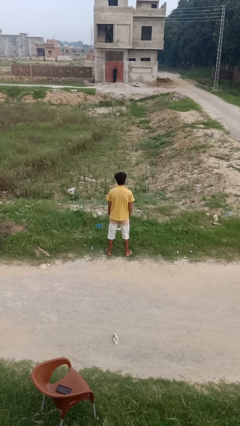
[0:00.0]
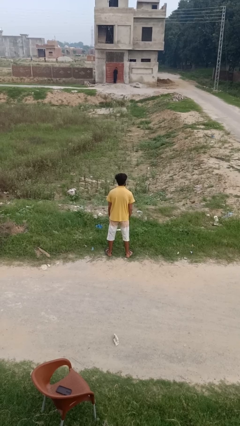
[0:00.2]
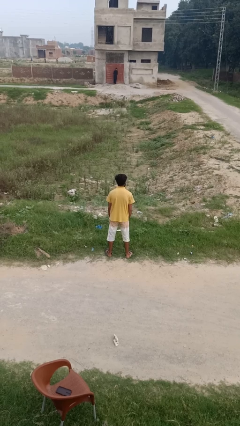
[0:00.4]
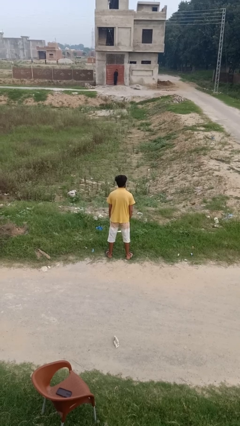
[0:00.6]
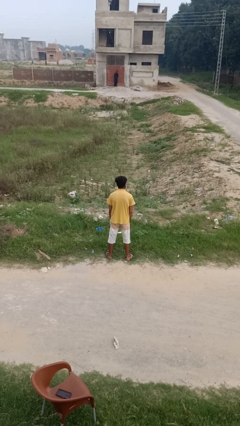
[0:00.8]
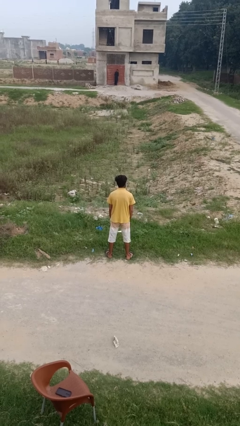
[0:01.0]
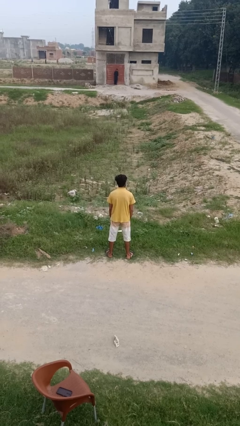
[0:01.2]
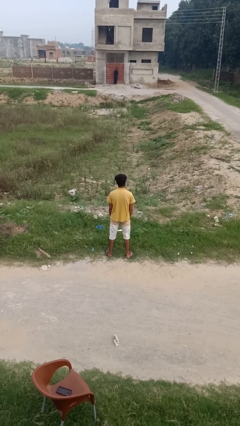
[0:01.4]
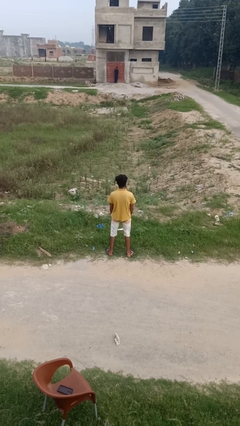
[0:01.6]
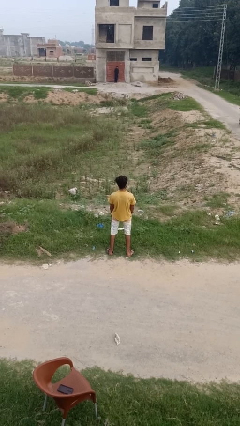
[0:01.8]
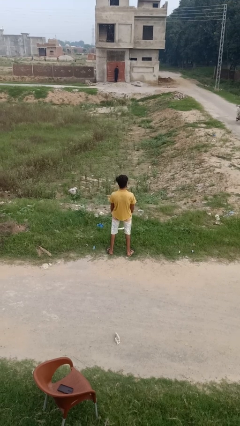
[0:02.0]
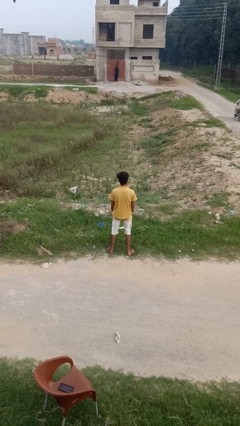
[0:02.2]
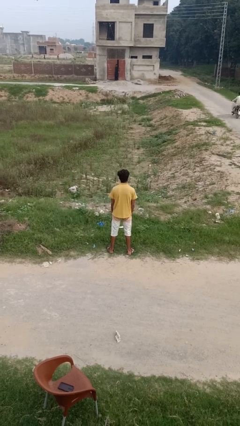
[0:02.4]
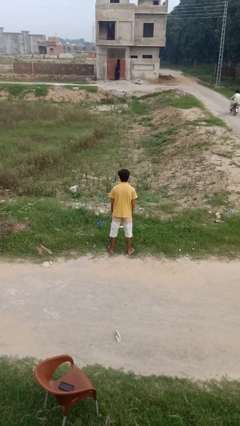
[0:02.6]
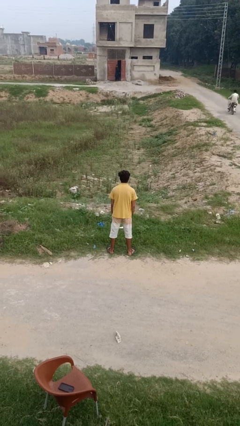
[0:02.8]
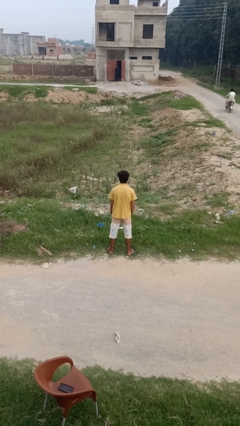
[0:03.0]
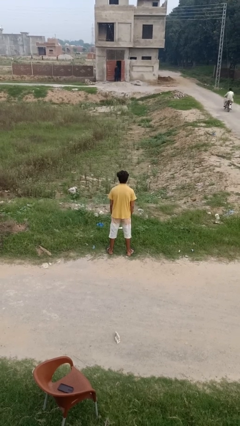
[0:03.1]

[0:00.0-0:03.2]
person wiggles hips

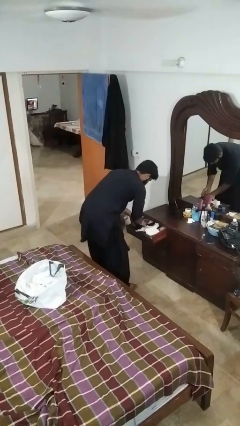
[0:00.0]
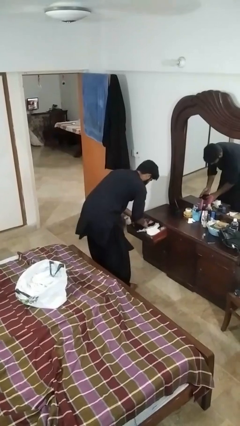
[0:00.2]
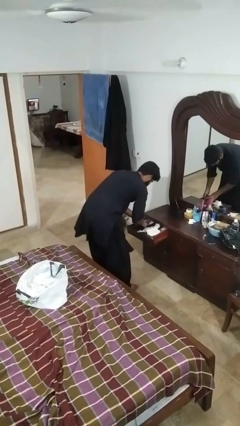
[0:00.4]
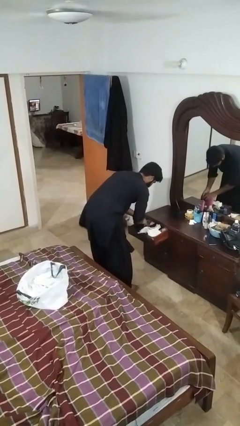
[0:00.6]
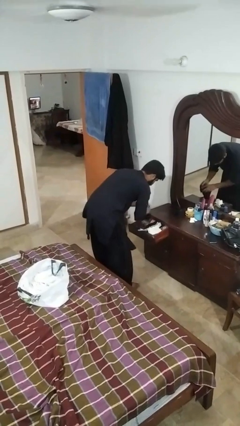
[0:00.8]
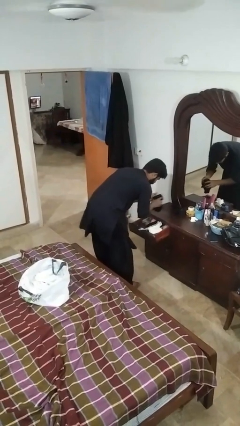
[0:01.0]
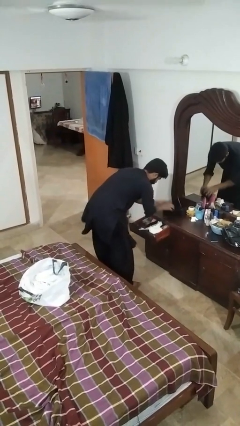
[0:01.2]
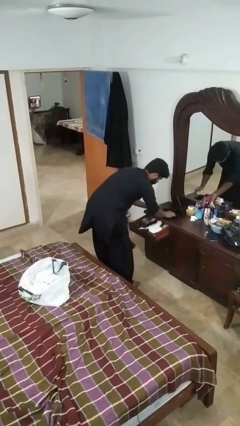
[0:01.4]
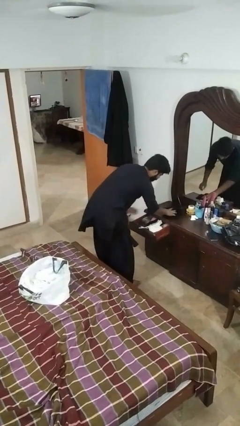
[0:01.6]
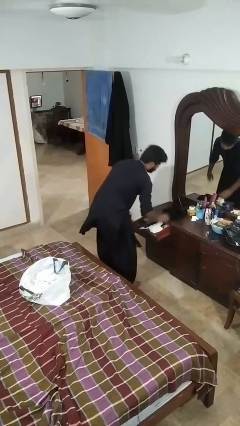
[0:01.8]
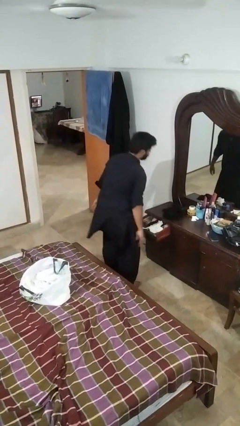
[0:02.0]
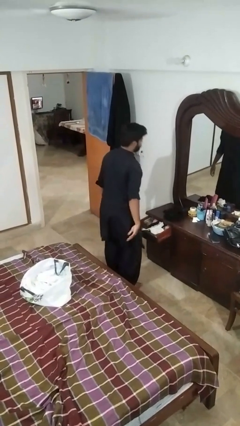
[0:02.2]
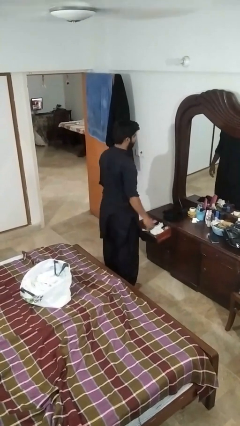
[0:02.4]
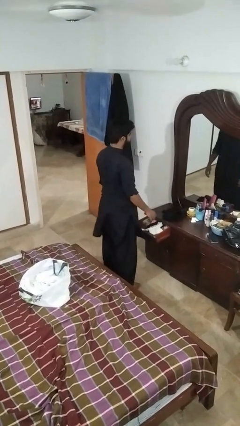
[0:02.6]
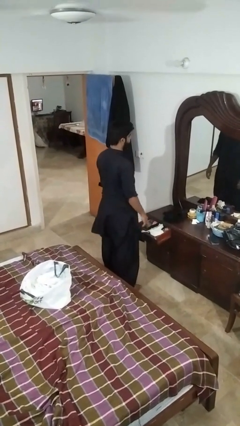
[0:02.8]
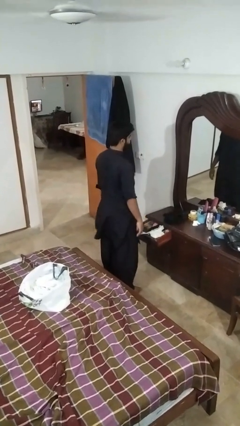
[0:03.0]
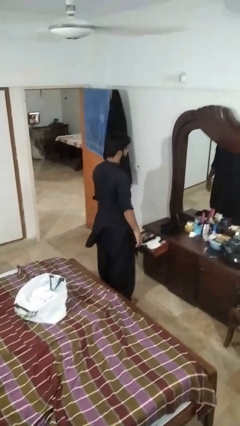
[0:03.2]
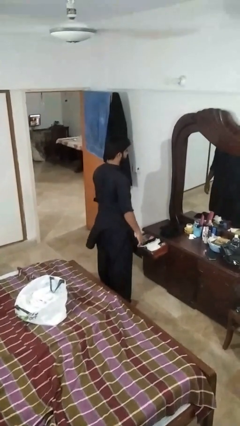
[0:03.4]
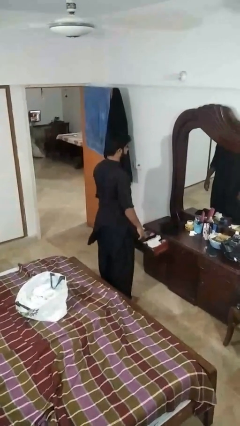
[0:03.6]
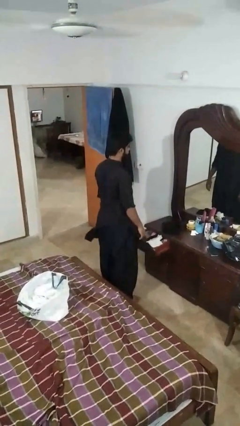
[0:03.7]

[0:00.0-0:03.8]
person takes clothes from dresser

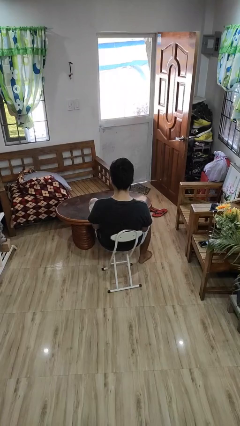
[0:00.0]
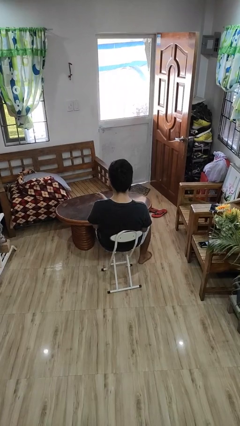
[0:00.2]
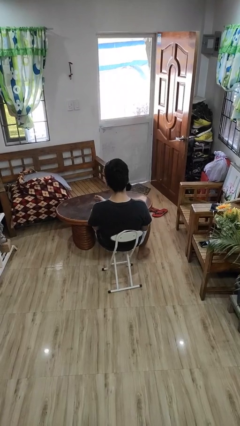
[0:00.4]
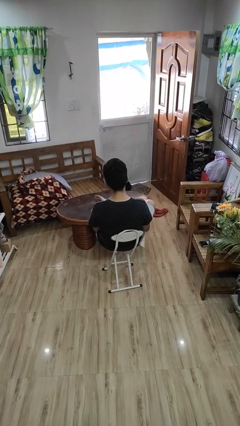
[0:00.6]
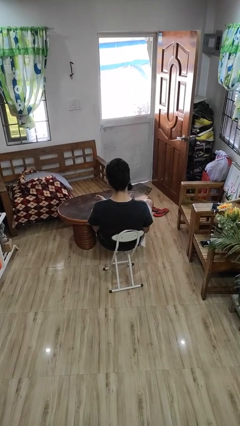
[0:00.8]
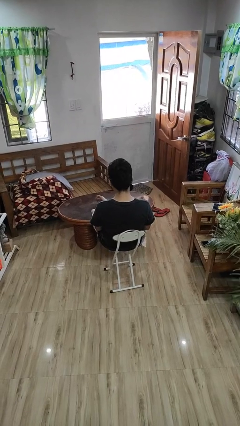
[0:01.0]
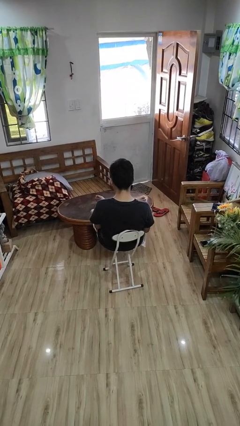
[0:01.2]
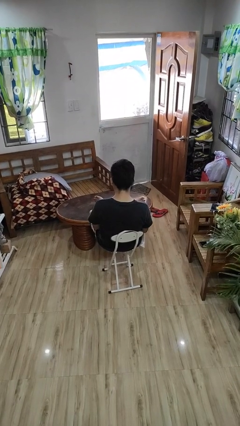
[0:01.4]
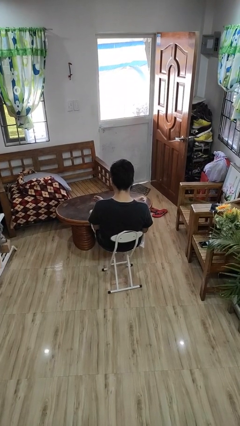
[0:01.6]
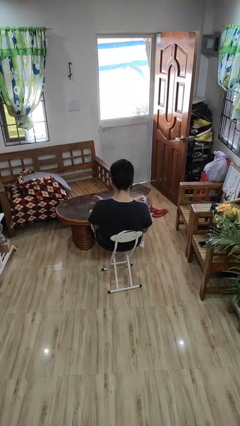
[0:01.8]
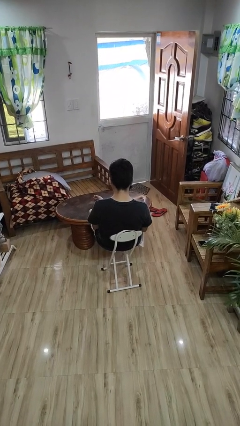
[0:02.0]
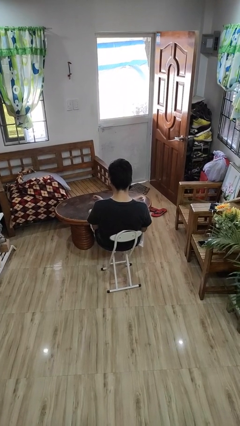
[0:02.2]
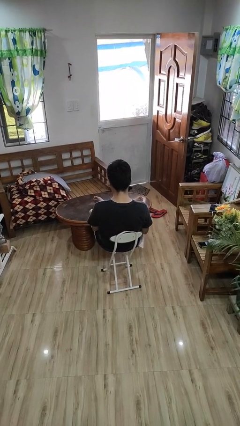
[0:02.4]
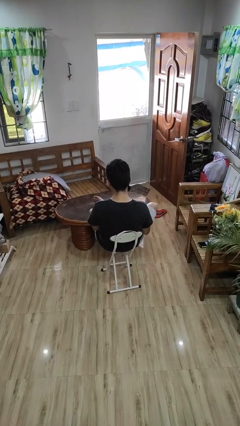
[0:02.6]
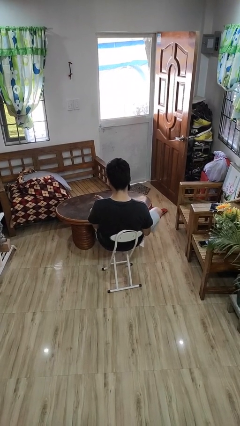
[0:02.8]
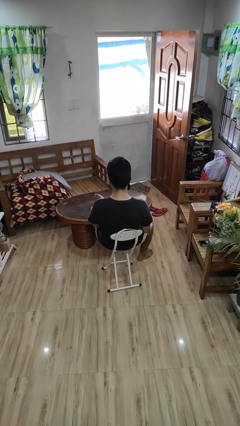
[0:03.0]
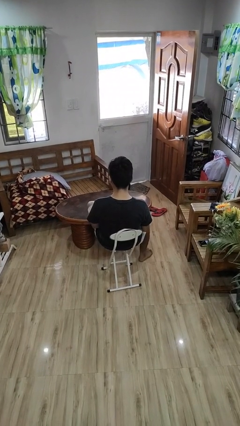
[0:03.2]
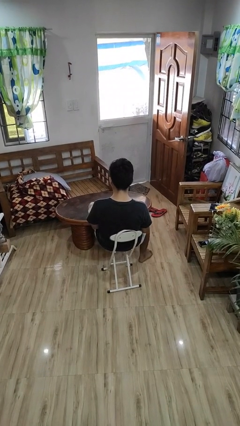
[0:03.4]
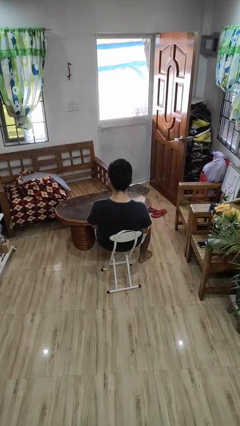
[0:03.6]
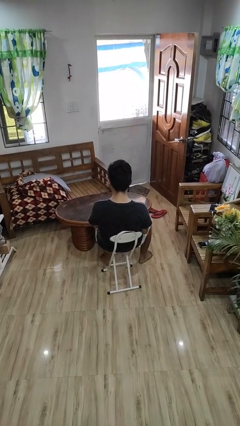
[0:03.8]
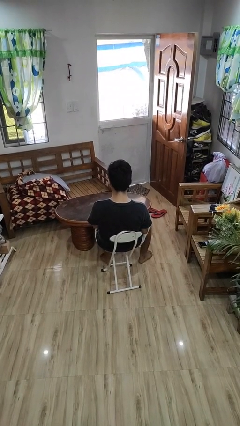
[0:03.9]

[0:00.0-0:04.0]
person puts feet up

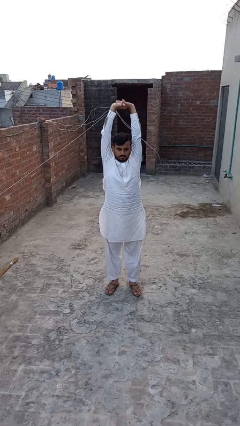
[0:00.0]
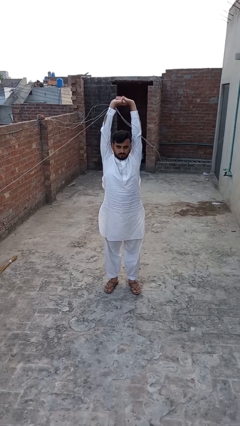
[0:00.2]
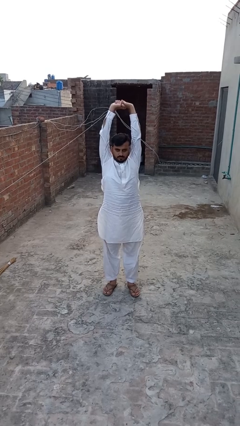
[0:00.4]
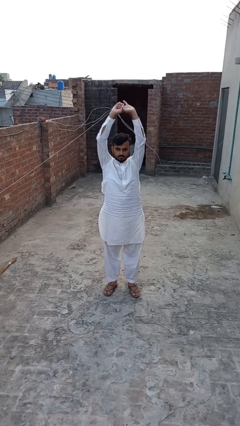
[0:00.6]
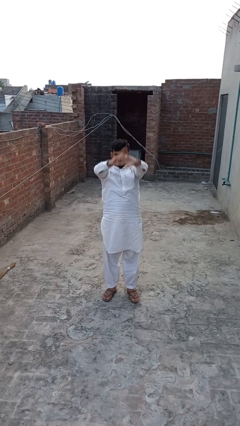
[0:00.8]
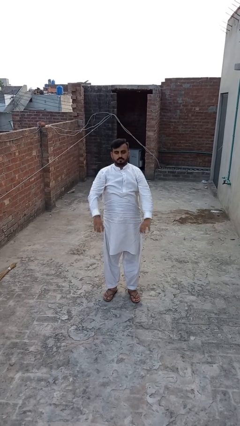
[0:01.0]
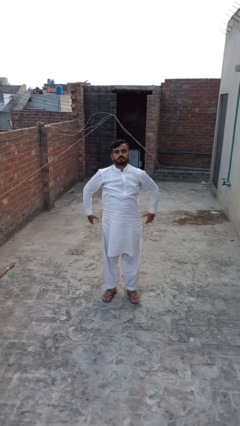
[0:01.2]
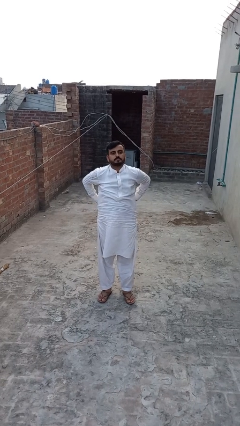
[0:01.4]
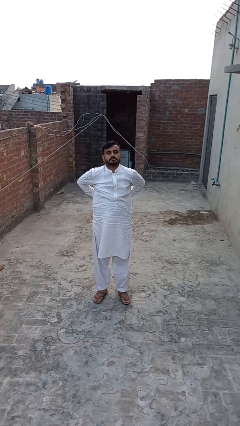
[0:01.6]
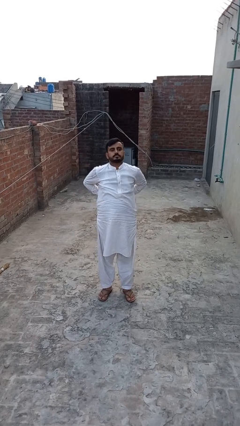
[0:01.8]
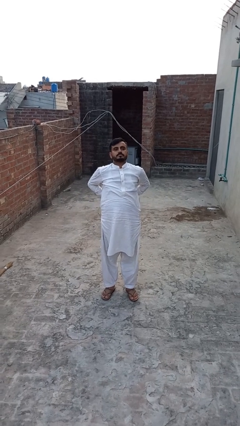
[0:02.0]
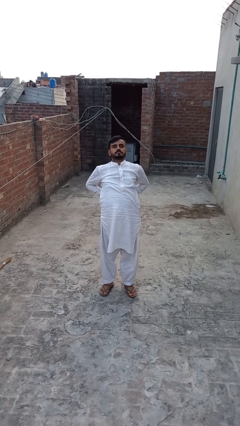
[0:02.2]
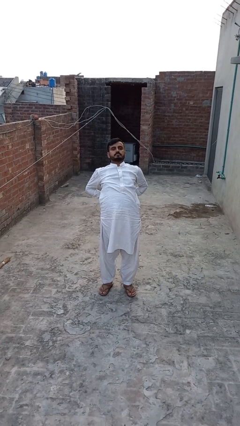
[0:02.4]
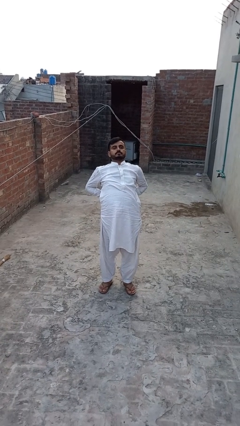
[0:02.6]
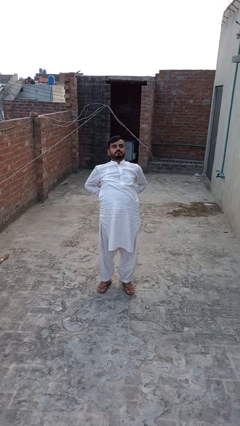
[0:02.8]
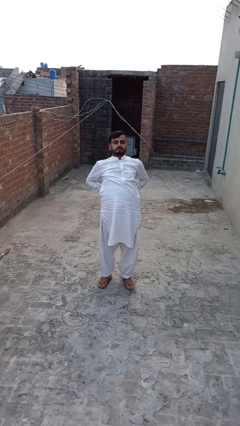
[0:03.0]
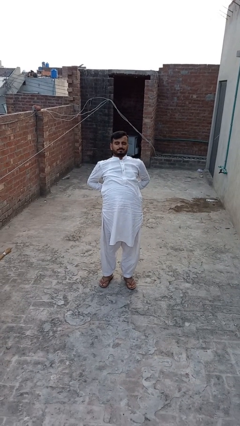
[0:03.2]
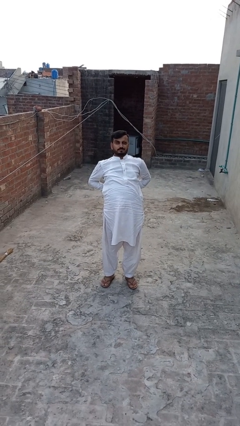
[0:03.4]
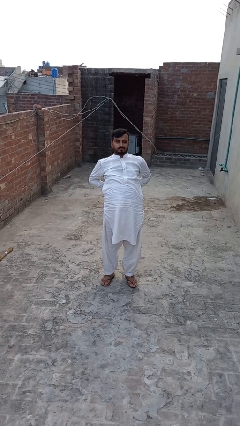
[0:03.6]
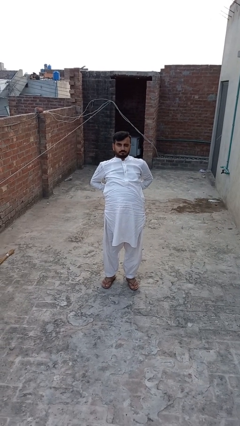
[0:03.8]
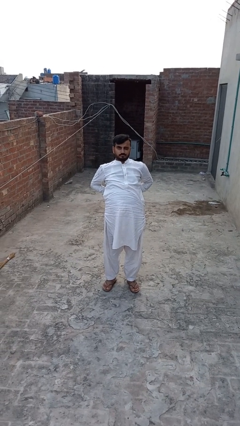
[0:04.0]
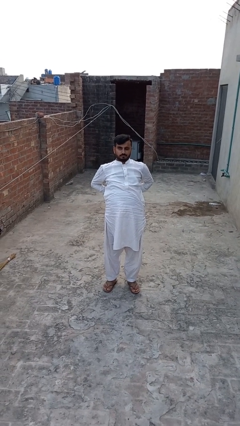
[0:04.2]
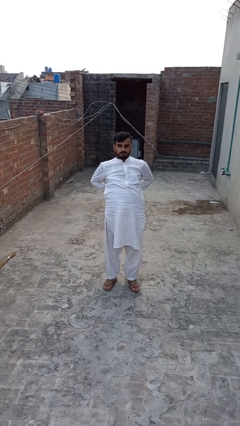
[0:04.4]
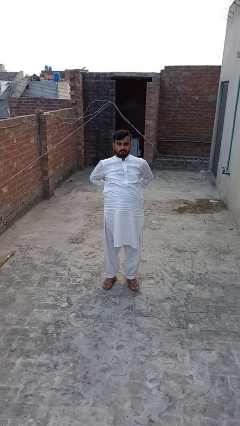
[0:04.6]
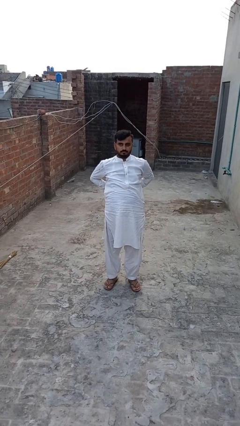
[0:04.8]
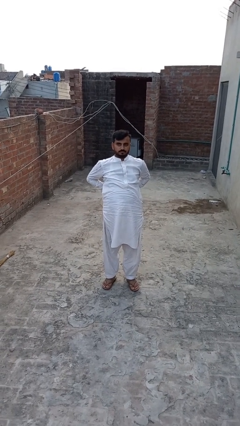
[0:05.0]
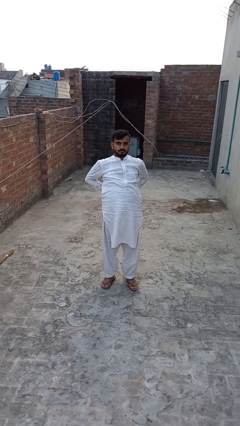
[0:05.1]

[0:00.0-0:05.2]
person stretches back

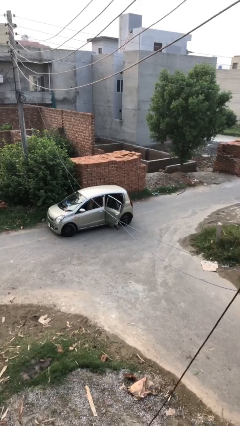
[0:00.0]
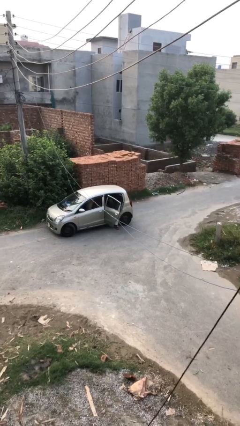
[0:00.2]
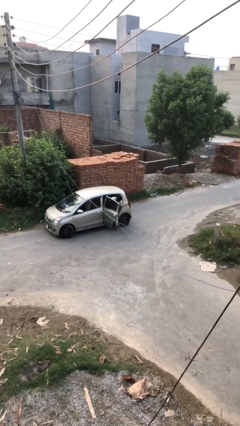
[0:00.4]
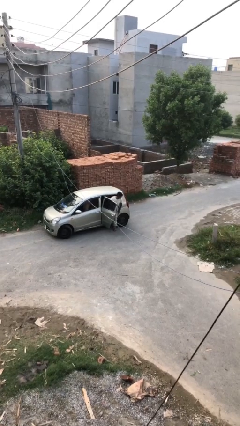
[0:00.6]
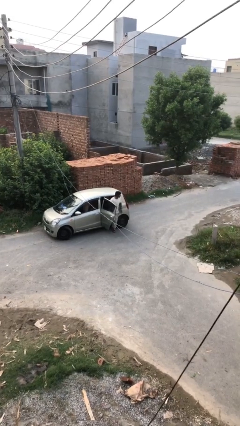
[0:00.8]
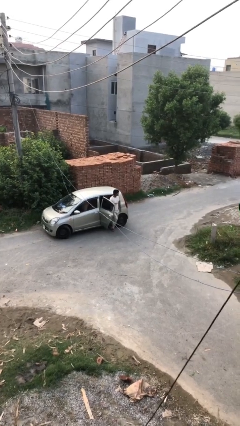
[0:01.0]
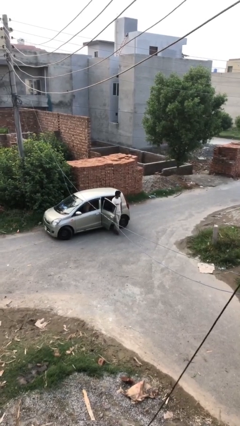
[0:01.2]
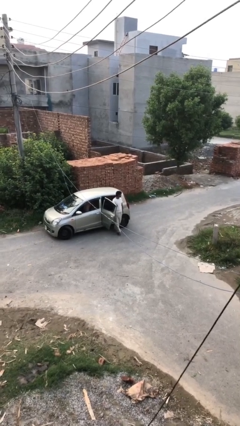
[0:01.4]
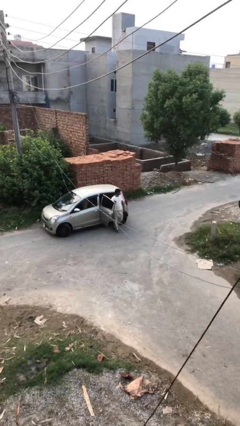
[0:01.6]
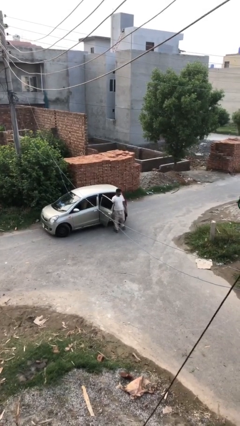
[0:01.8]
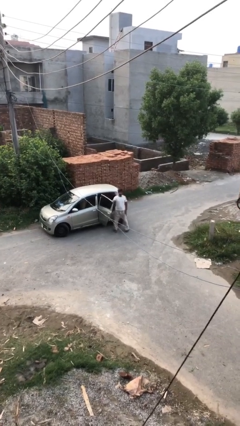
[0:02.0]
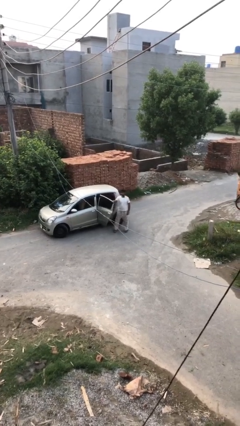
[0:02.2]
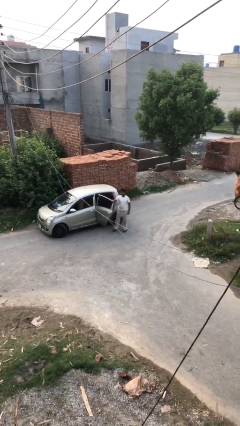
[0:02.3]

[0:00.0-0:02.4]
person exits car
